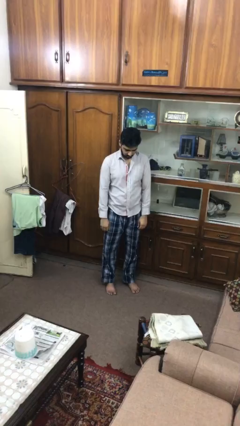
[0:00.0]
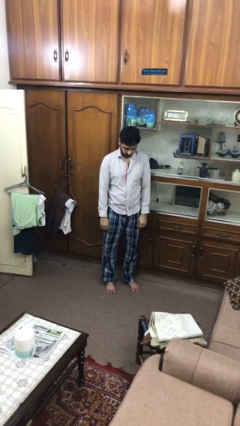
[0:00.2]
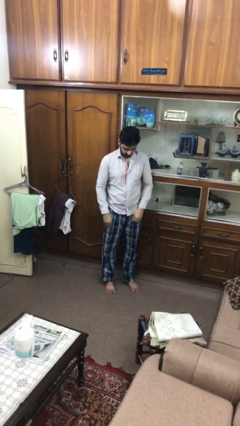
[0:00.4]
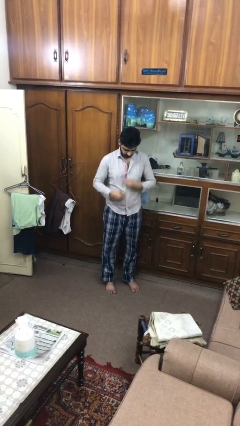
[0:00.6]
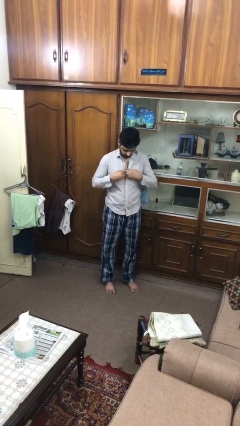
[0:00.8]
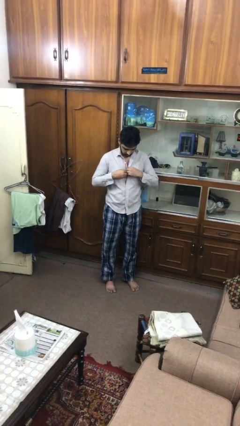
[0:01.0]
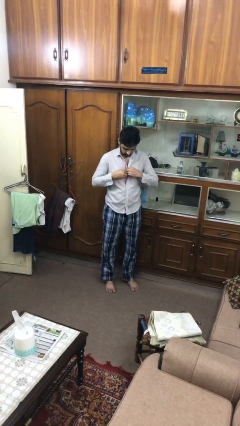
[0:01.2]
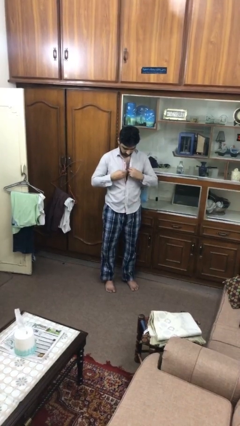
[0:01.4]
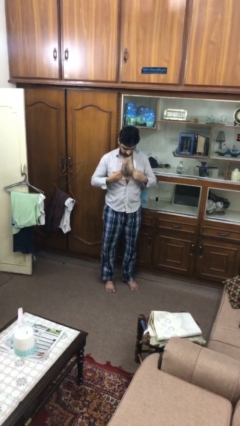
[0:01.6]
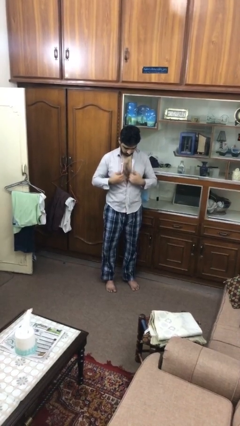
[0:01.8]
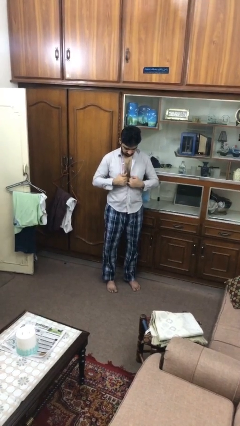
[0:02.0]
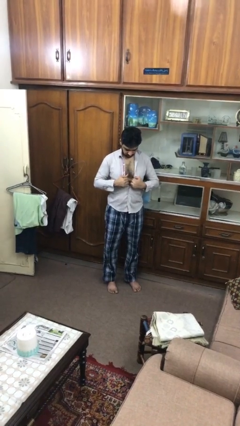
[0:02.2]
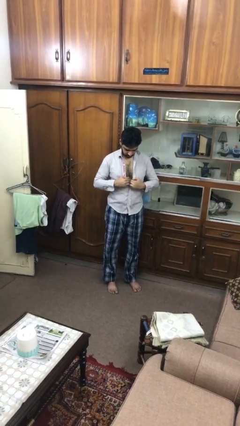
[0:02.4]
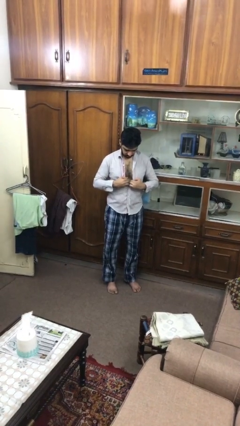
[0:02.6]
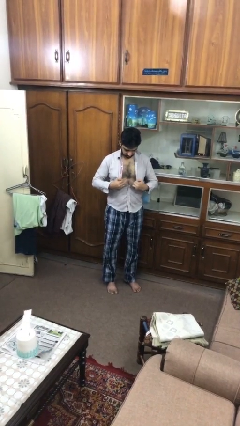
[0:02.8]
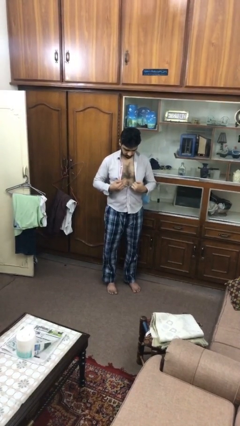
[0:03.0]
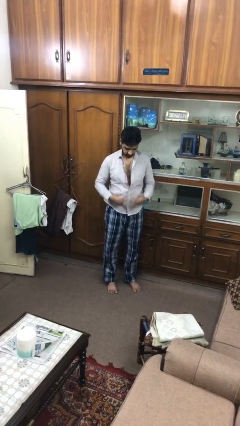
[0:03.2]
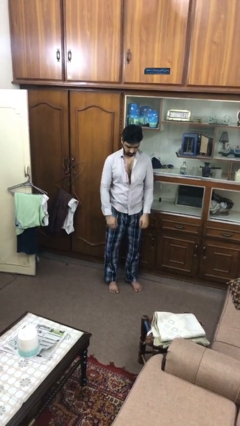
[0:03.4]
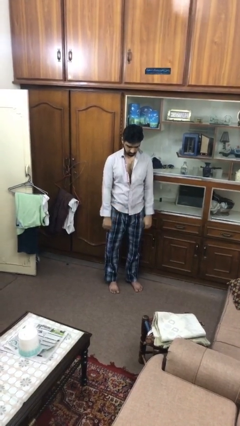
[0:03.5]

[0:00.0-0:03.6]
person unbuttons shirt

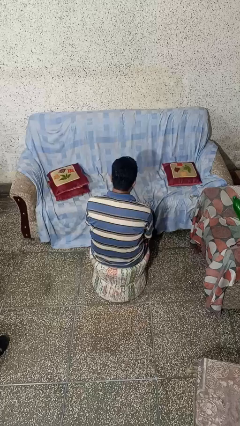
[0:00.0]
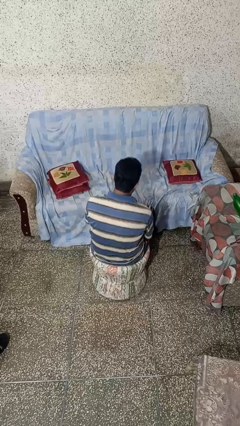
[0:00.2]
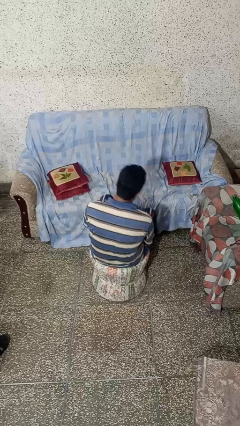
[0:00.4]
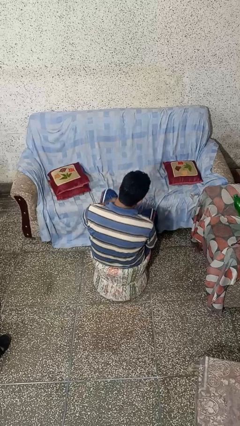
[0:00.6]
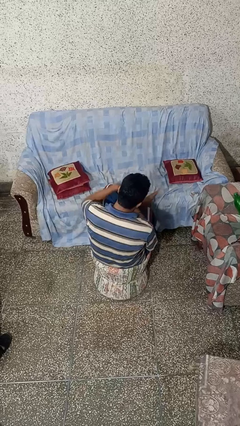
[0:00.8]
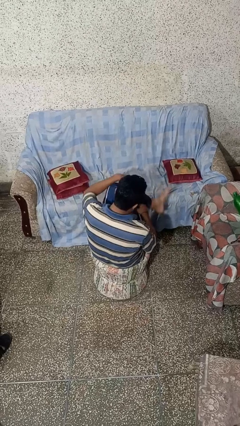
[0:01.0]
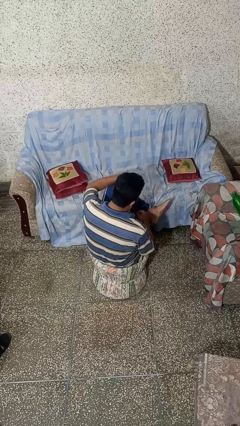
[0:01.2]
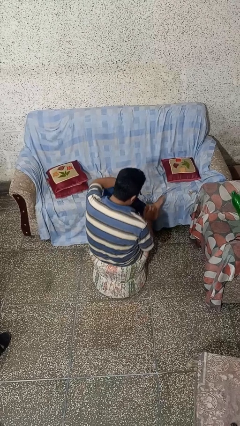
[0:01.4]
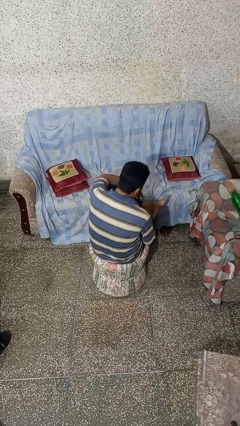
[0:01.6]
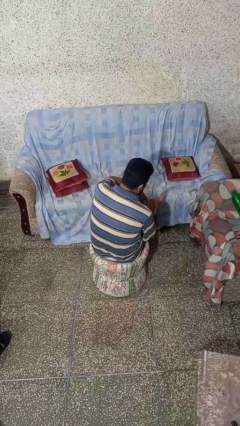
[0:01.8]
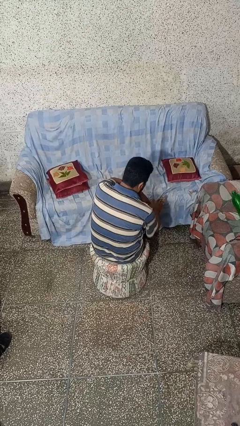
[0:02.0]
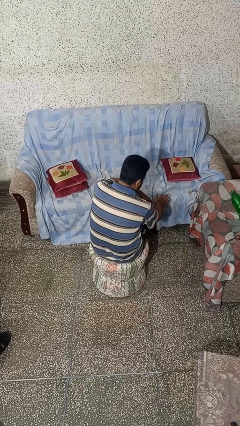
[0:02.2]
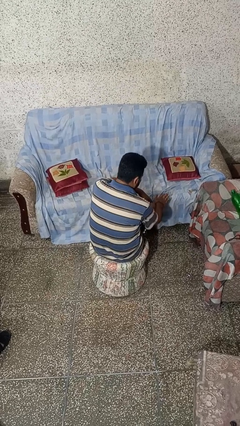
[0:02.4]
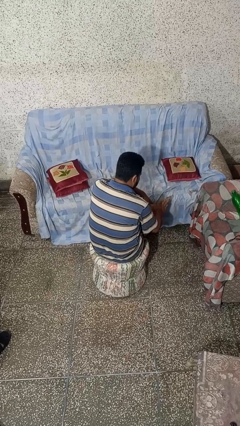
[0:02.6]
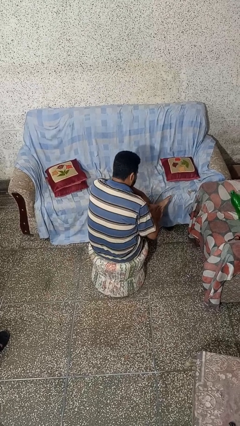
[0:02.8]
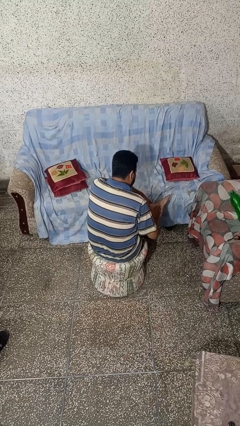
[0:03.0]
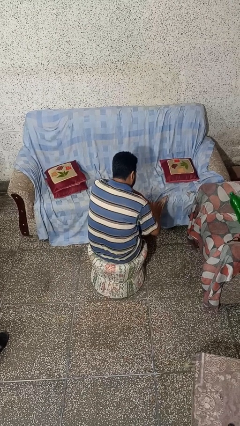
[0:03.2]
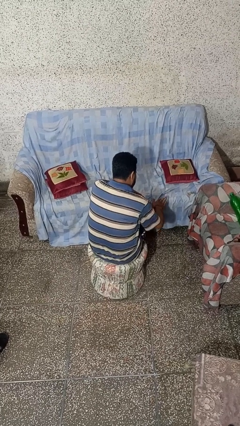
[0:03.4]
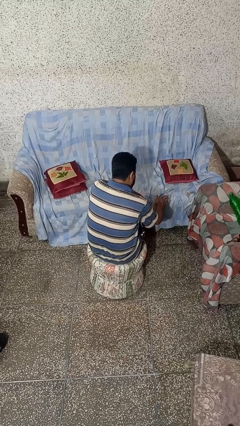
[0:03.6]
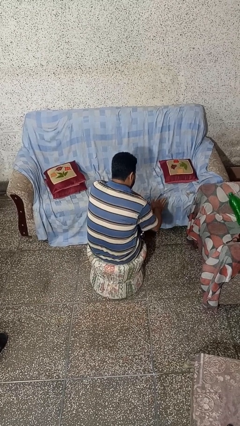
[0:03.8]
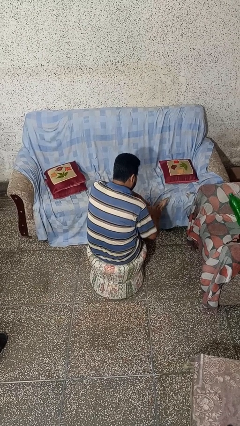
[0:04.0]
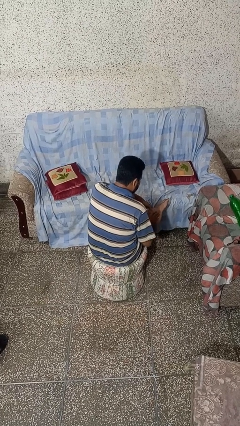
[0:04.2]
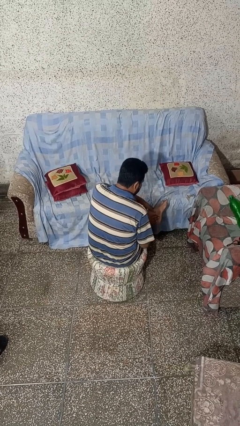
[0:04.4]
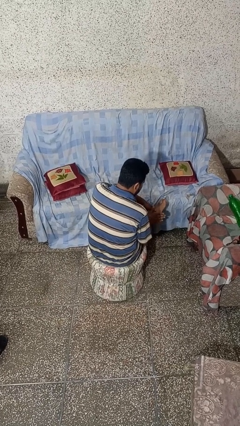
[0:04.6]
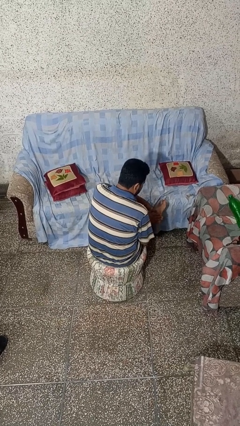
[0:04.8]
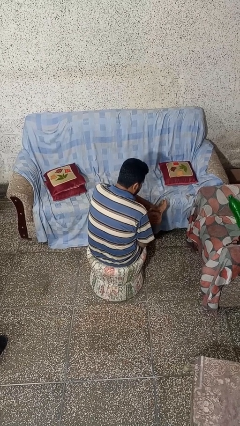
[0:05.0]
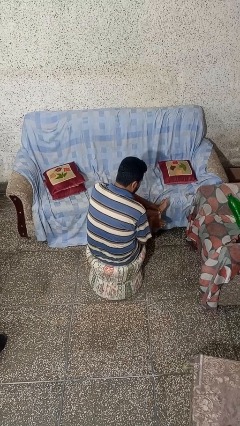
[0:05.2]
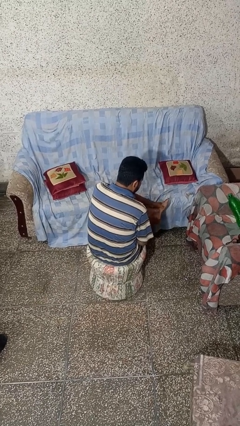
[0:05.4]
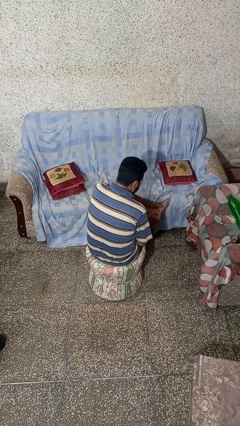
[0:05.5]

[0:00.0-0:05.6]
person rubs foot

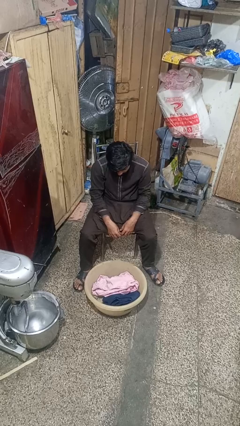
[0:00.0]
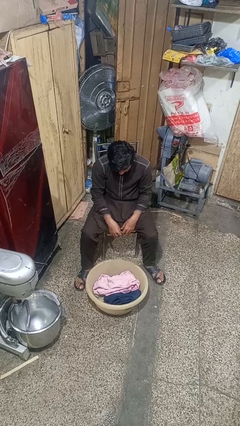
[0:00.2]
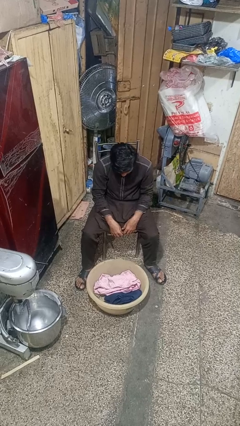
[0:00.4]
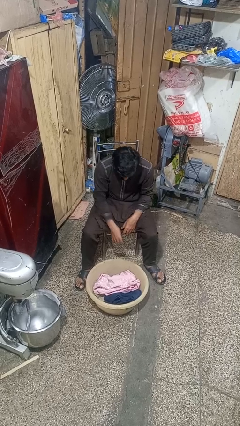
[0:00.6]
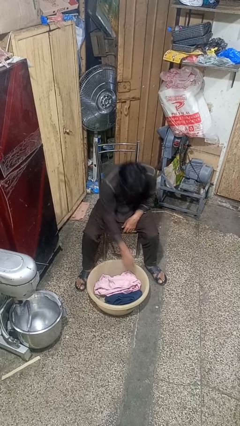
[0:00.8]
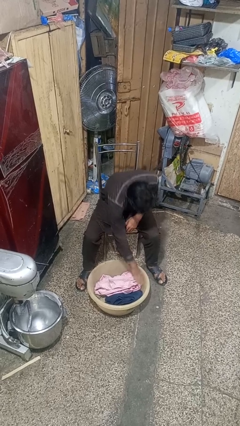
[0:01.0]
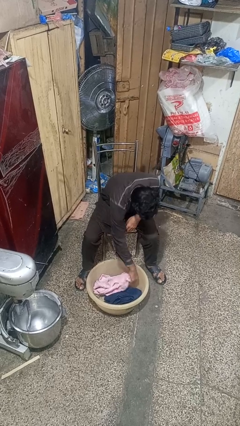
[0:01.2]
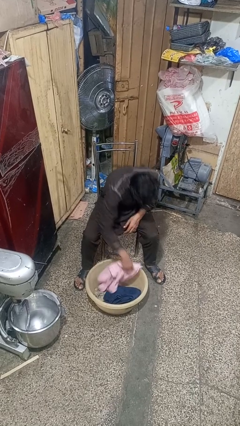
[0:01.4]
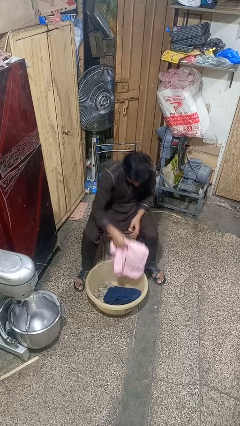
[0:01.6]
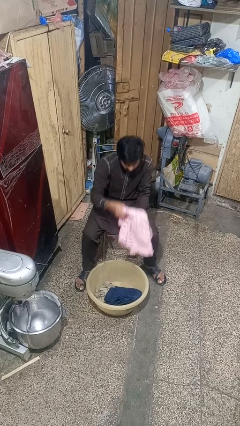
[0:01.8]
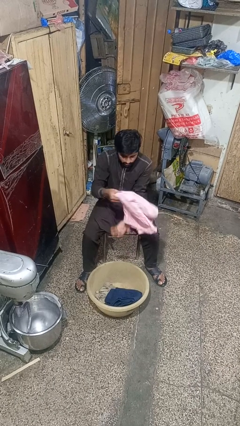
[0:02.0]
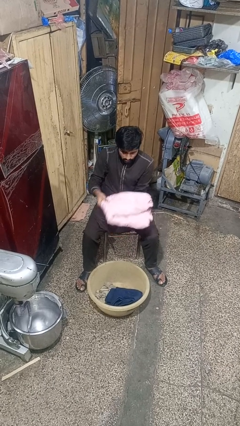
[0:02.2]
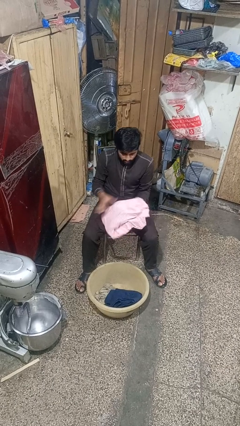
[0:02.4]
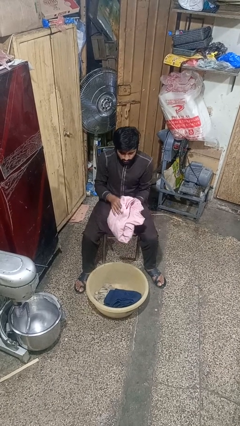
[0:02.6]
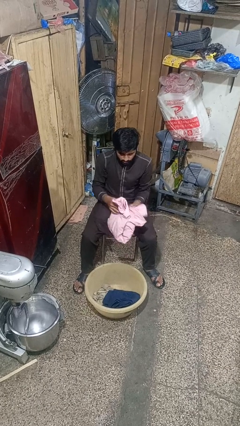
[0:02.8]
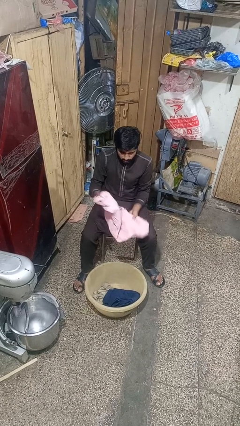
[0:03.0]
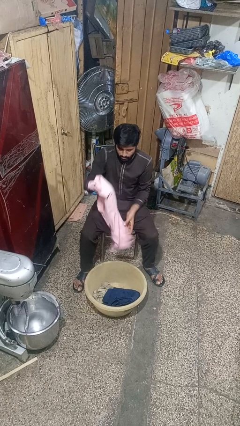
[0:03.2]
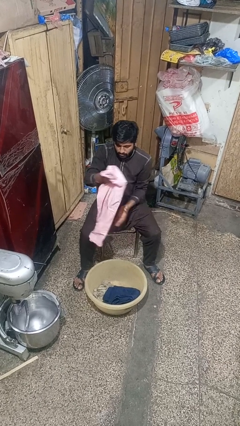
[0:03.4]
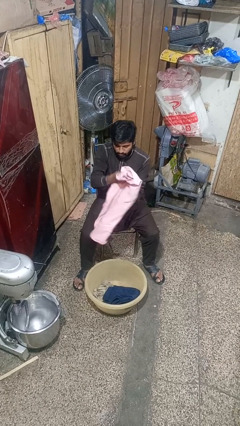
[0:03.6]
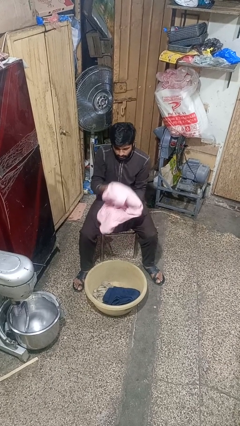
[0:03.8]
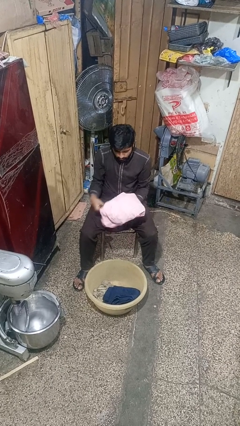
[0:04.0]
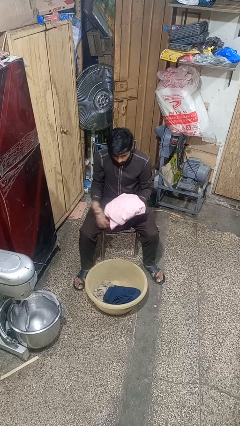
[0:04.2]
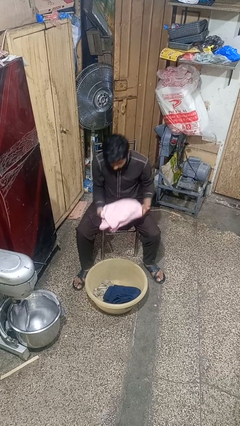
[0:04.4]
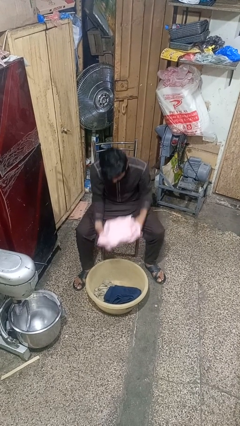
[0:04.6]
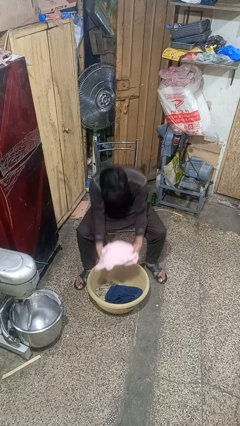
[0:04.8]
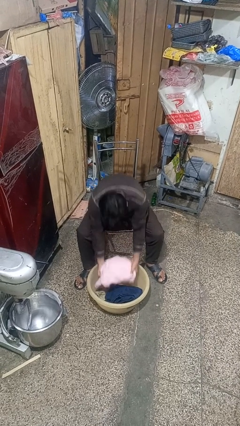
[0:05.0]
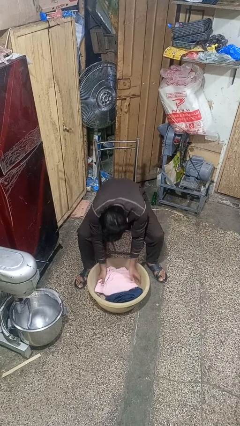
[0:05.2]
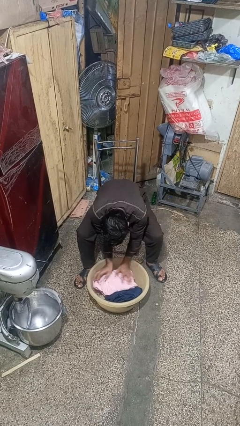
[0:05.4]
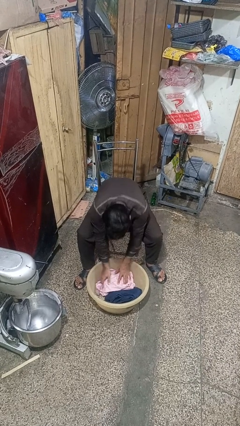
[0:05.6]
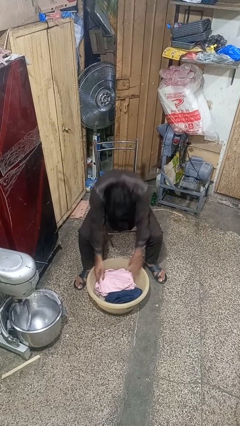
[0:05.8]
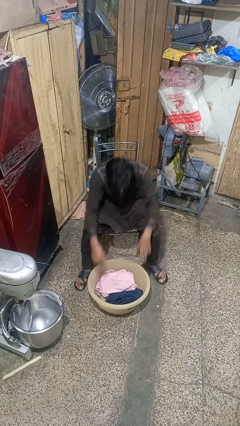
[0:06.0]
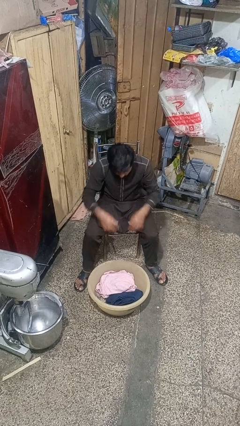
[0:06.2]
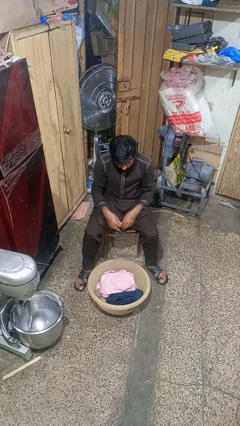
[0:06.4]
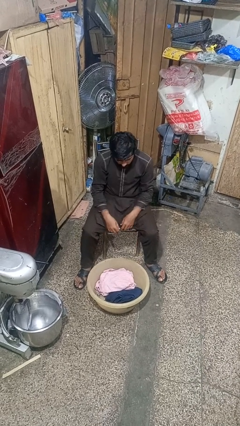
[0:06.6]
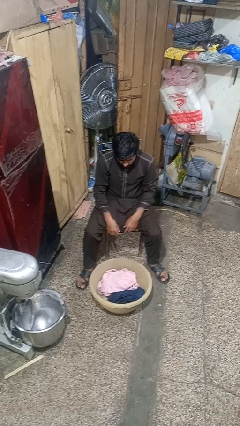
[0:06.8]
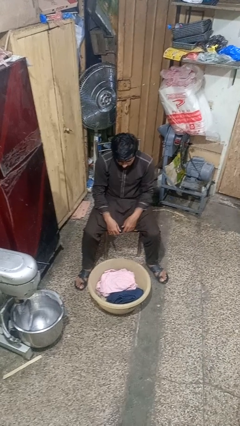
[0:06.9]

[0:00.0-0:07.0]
person folds shirt

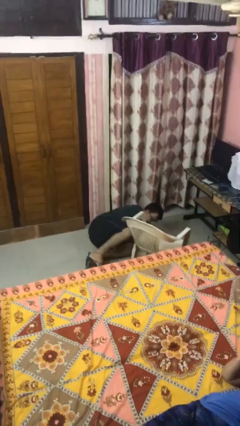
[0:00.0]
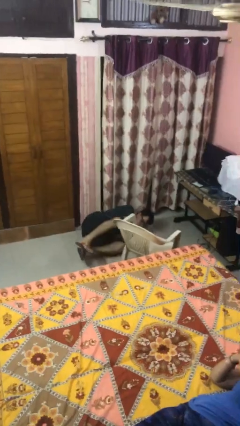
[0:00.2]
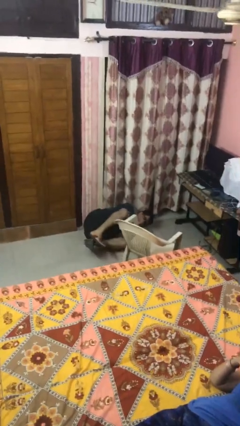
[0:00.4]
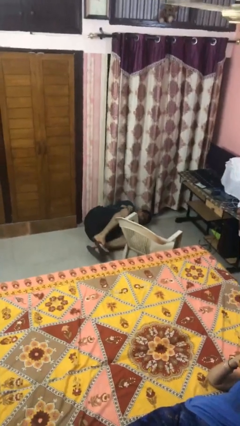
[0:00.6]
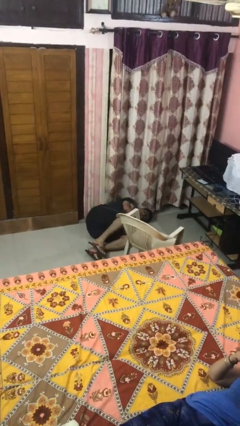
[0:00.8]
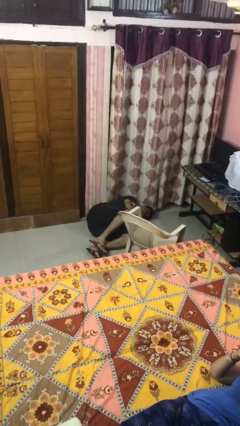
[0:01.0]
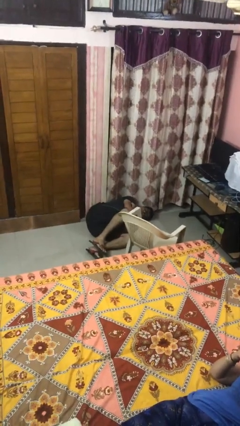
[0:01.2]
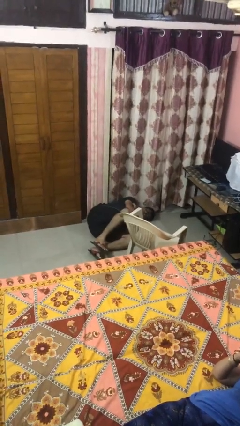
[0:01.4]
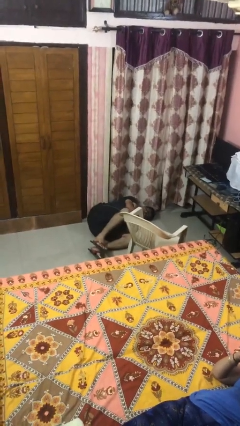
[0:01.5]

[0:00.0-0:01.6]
person lies down on floor
